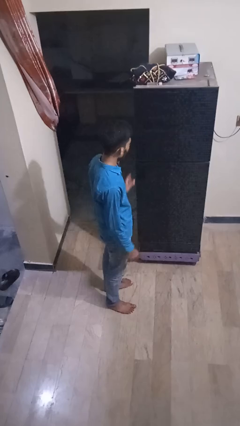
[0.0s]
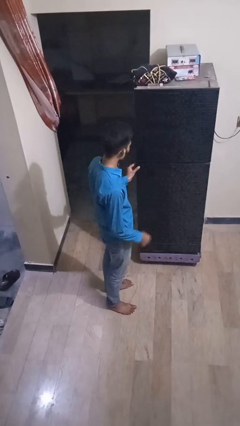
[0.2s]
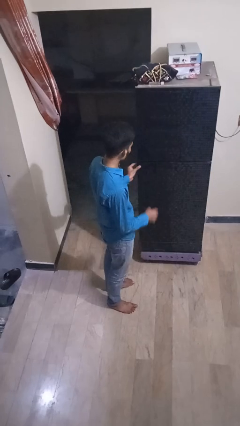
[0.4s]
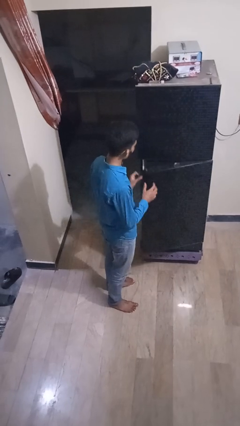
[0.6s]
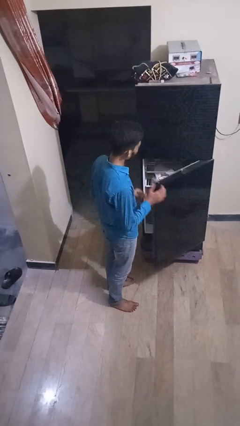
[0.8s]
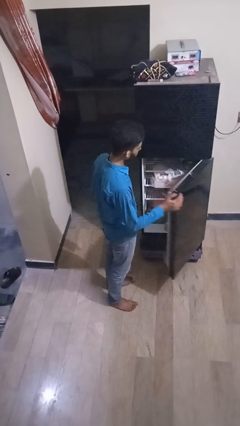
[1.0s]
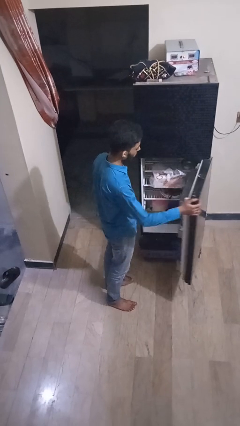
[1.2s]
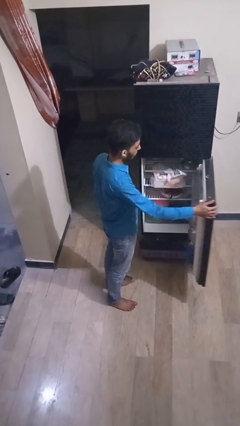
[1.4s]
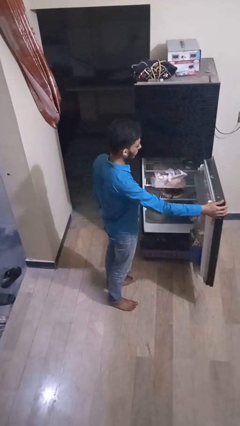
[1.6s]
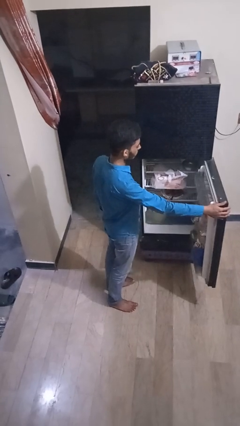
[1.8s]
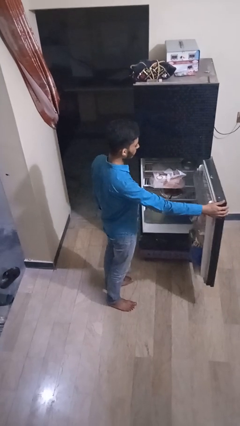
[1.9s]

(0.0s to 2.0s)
person opens refrigerator

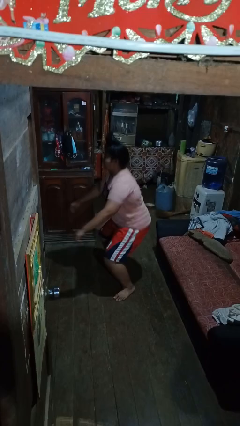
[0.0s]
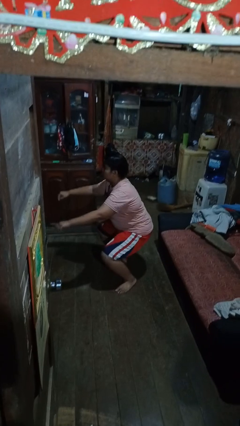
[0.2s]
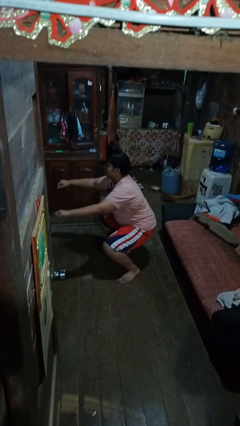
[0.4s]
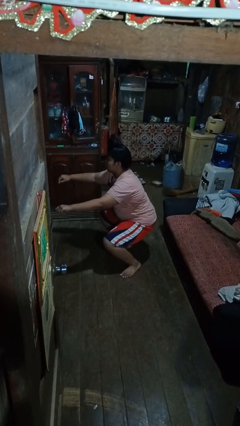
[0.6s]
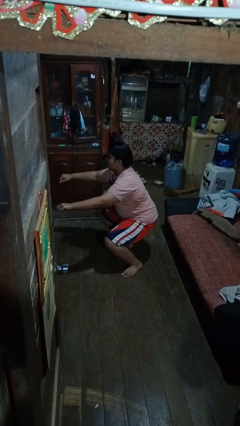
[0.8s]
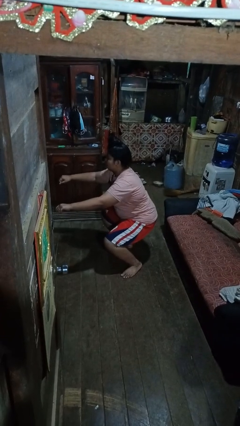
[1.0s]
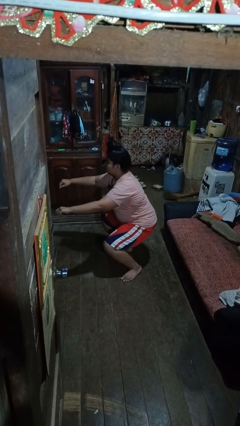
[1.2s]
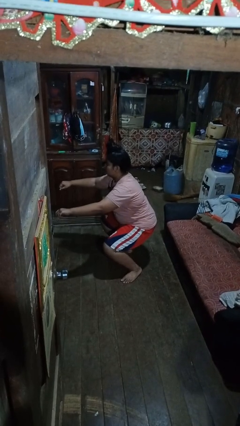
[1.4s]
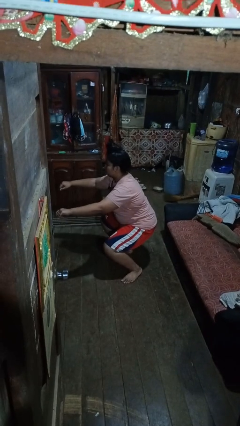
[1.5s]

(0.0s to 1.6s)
person squats

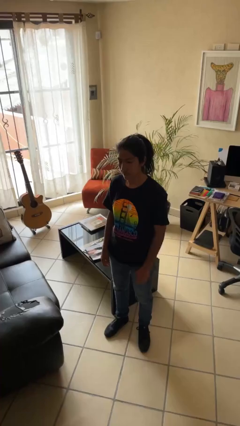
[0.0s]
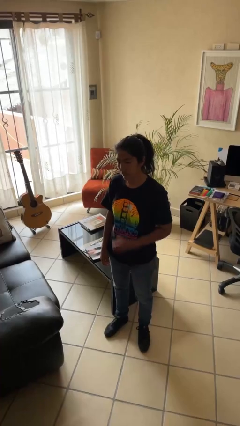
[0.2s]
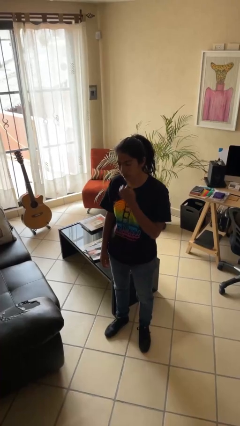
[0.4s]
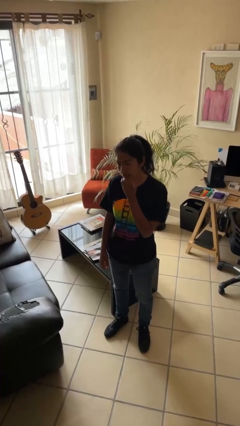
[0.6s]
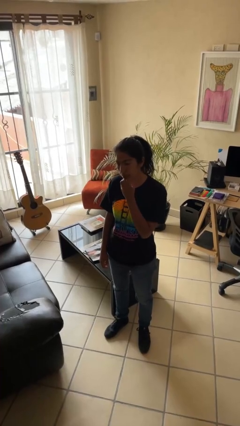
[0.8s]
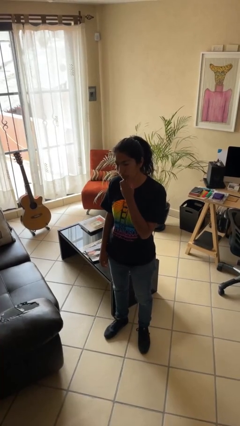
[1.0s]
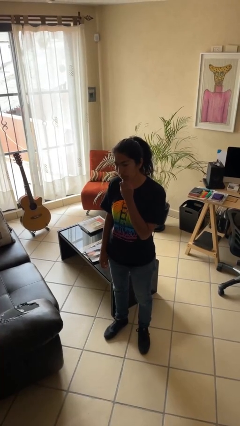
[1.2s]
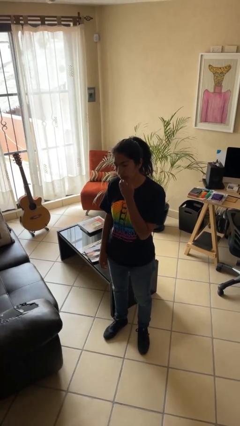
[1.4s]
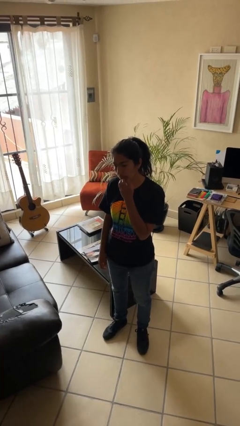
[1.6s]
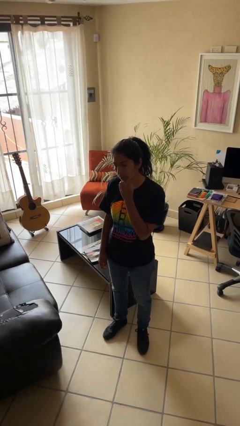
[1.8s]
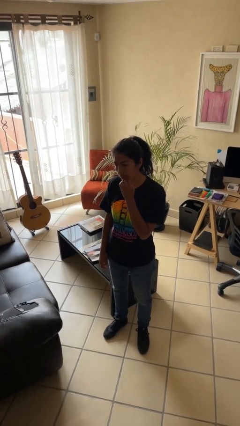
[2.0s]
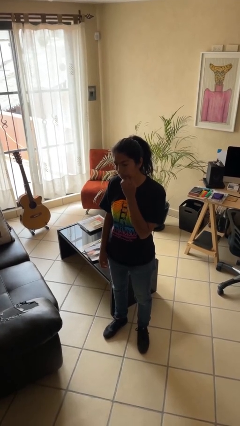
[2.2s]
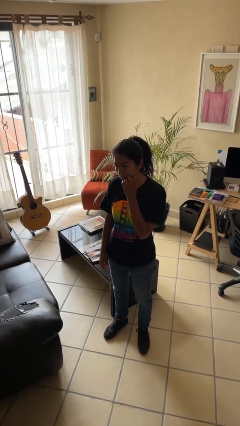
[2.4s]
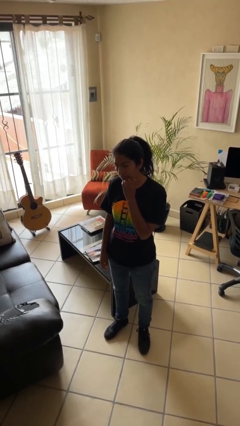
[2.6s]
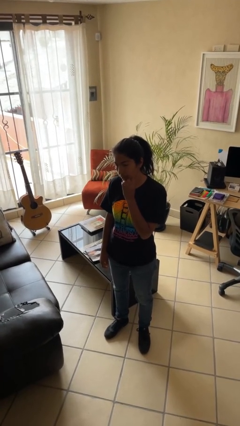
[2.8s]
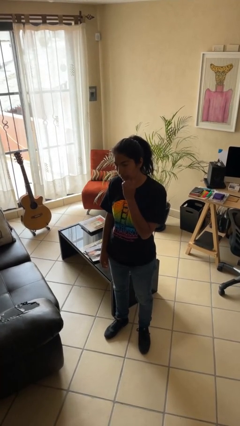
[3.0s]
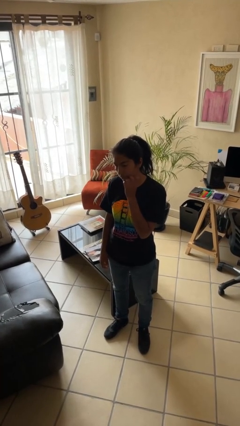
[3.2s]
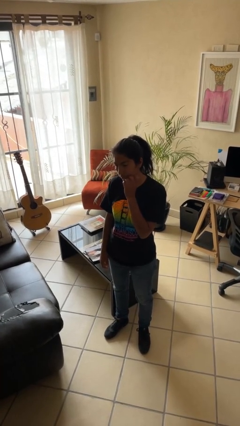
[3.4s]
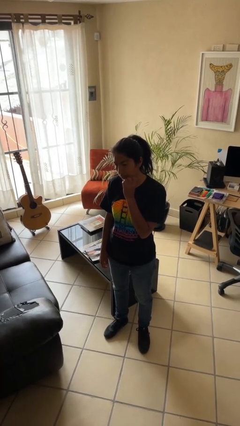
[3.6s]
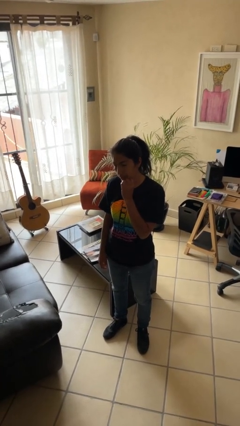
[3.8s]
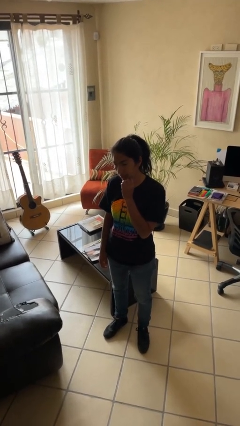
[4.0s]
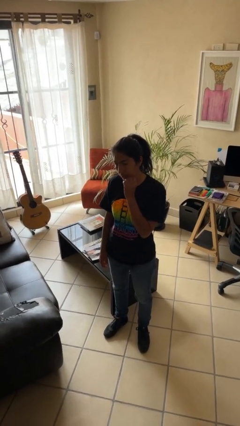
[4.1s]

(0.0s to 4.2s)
person scratches face

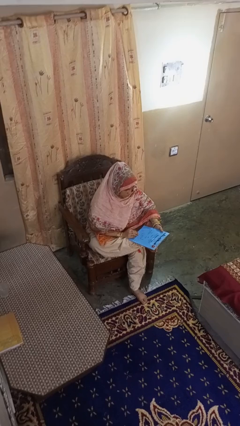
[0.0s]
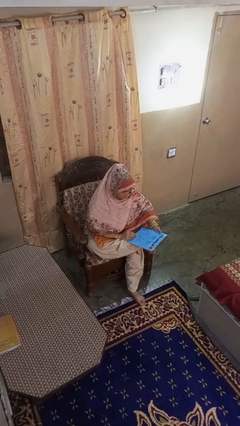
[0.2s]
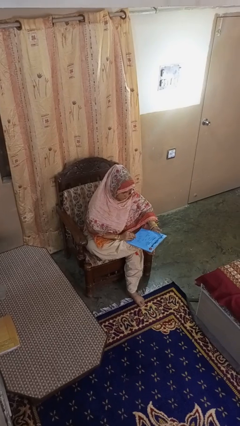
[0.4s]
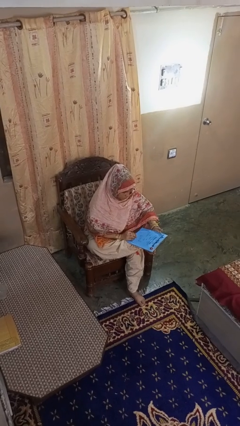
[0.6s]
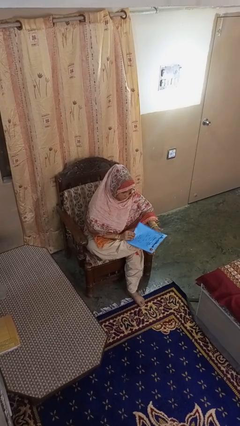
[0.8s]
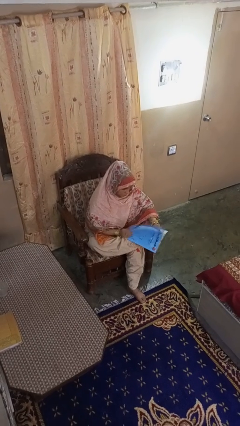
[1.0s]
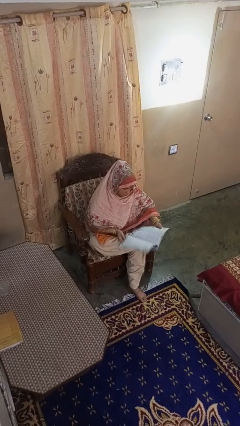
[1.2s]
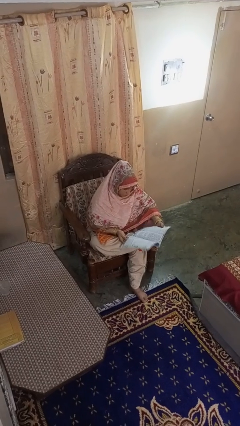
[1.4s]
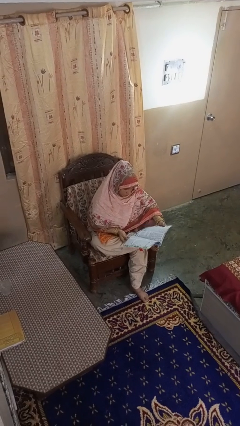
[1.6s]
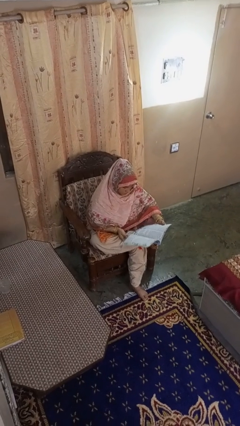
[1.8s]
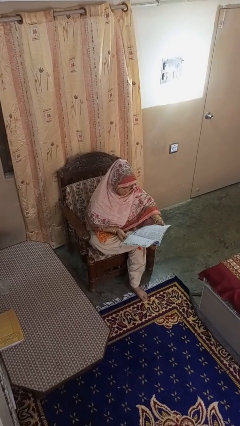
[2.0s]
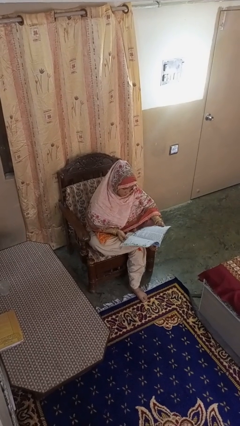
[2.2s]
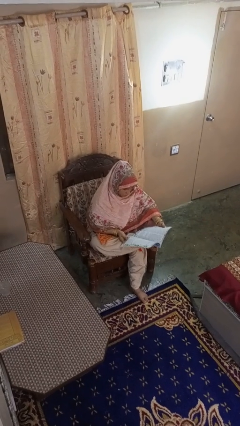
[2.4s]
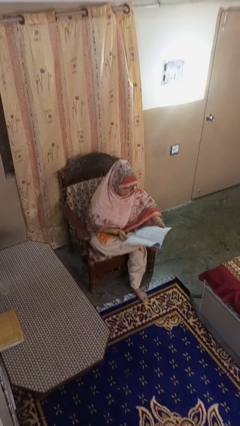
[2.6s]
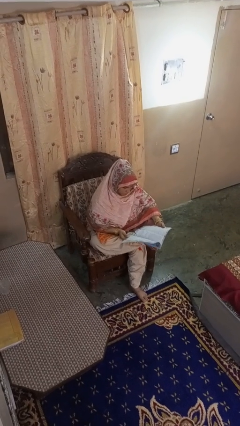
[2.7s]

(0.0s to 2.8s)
person reads magazine

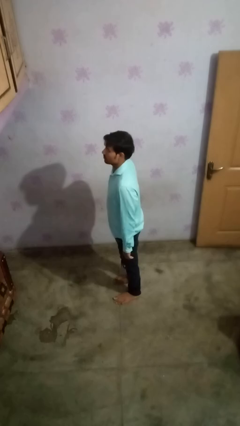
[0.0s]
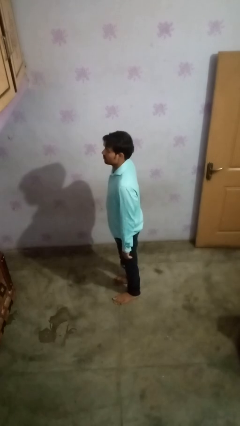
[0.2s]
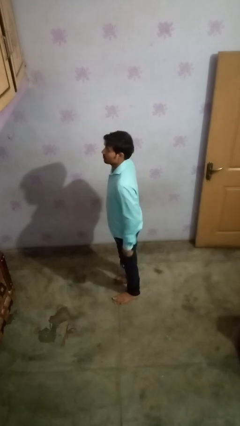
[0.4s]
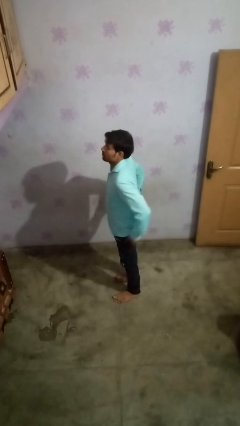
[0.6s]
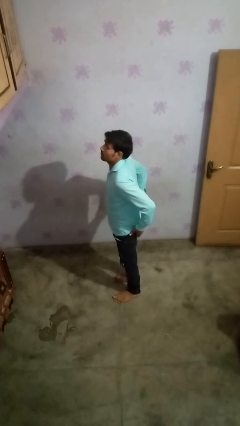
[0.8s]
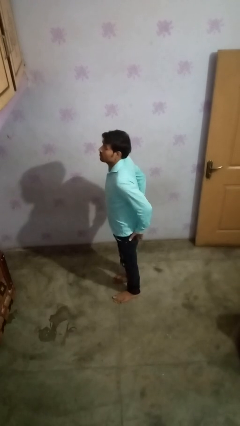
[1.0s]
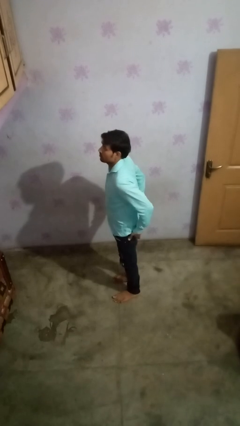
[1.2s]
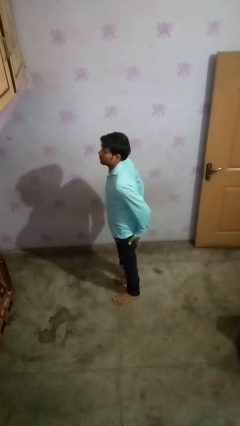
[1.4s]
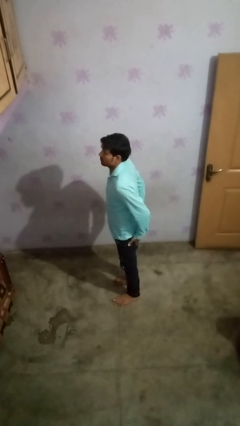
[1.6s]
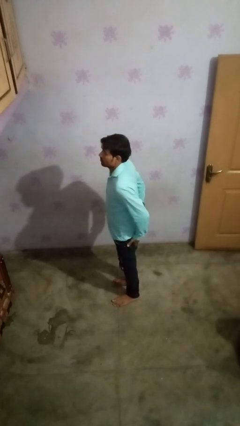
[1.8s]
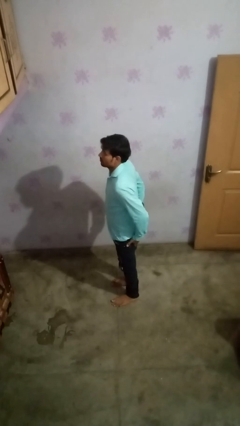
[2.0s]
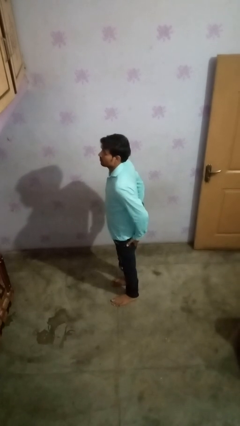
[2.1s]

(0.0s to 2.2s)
person puts hands in back pockets

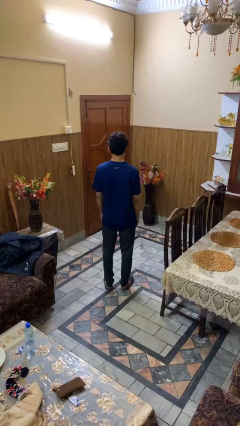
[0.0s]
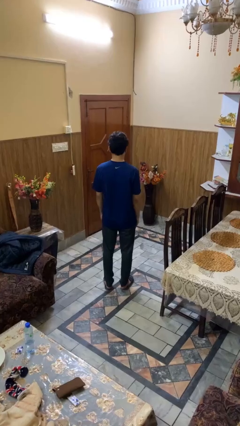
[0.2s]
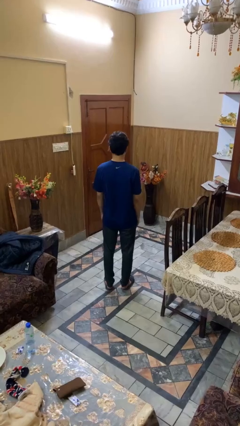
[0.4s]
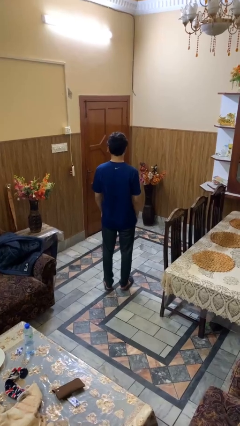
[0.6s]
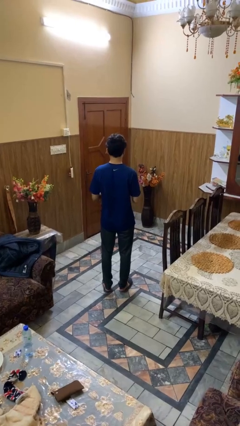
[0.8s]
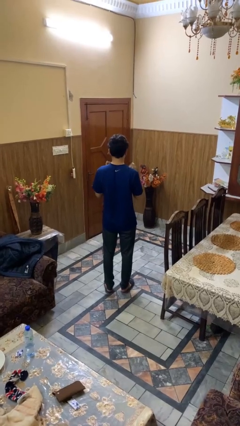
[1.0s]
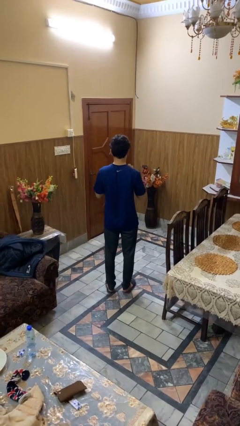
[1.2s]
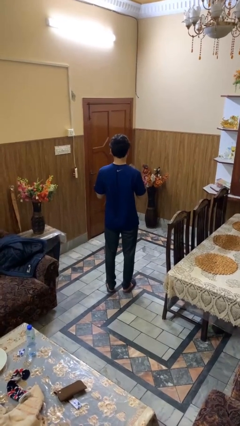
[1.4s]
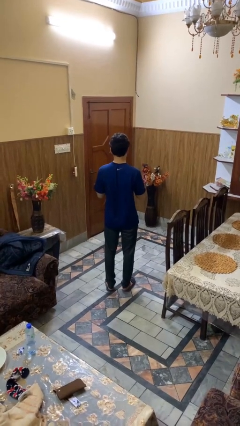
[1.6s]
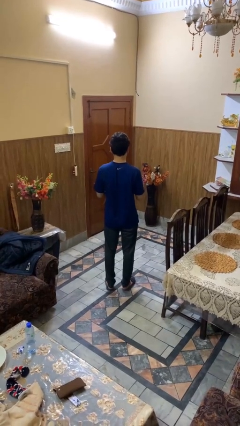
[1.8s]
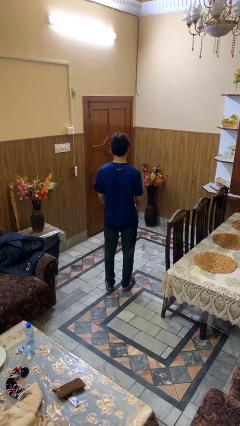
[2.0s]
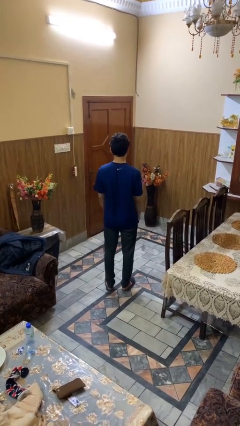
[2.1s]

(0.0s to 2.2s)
person drums on chest

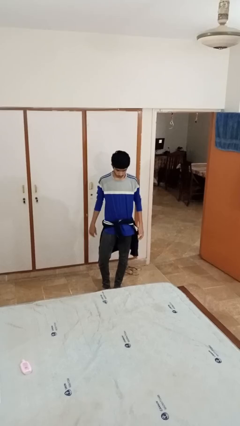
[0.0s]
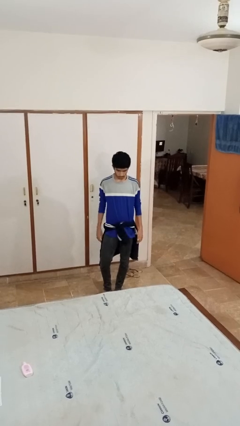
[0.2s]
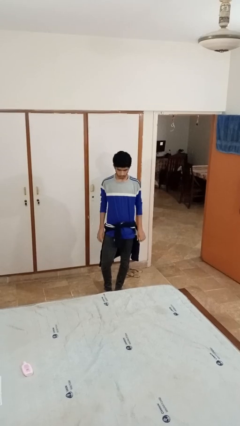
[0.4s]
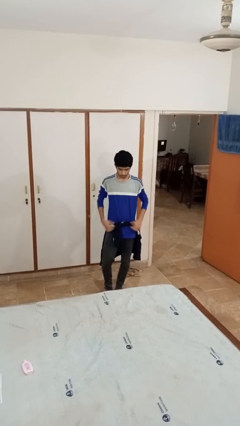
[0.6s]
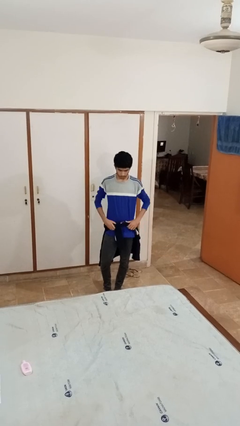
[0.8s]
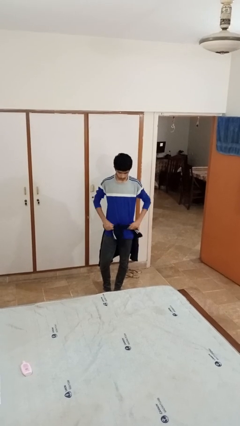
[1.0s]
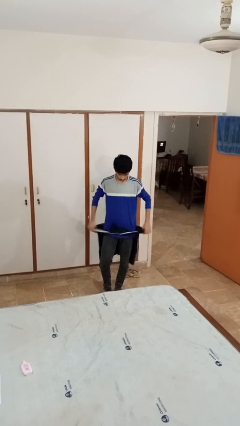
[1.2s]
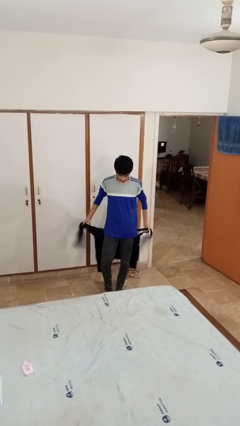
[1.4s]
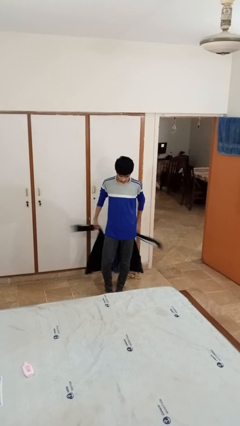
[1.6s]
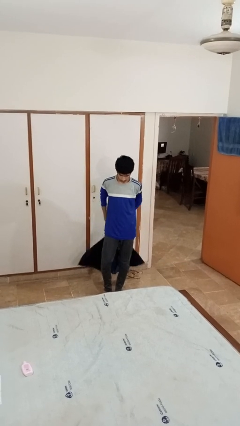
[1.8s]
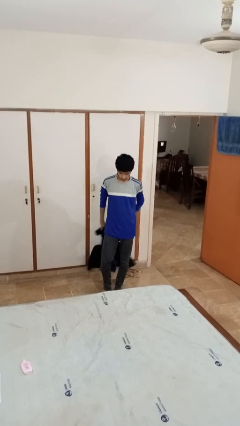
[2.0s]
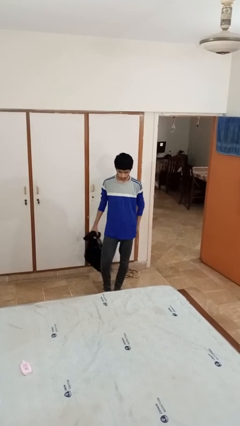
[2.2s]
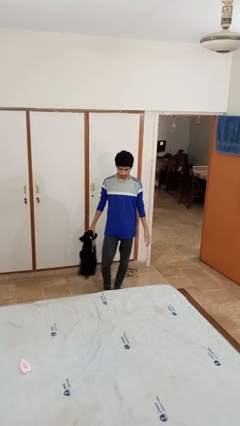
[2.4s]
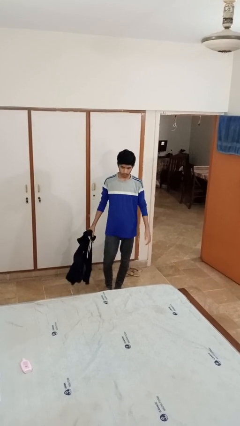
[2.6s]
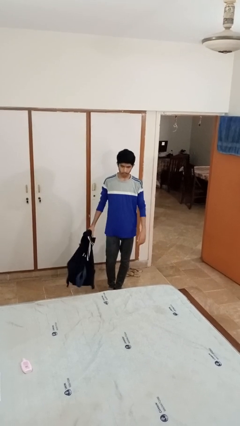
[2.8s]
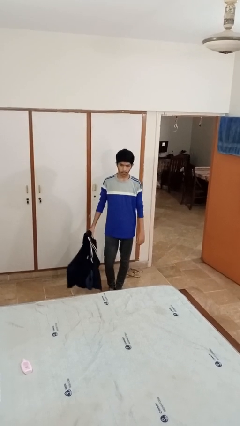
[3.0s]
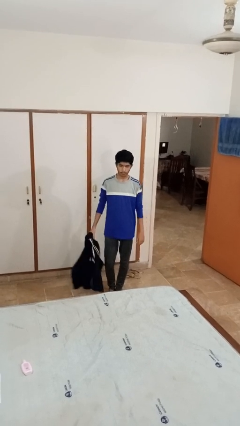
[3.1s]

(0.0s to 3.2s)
person unties jacket around waist
